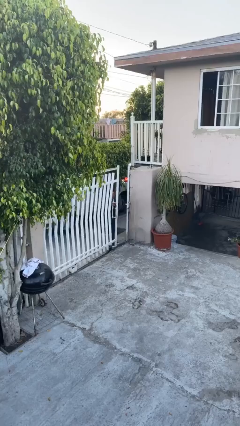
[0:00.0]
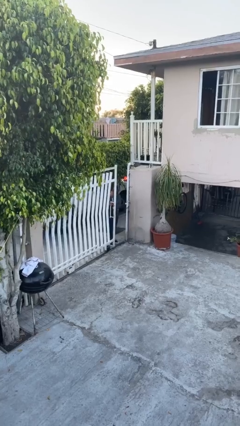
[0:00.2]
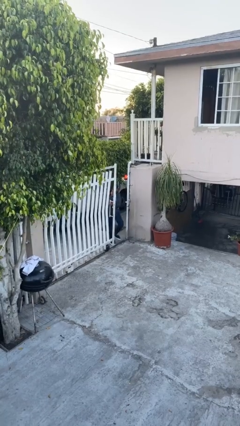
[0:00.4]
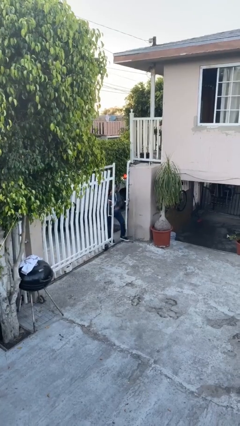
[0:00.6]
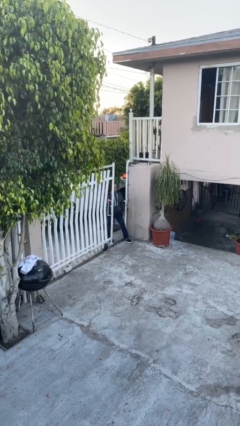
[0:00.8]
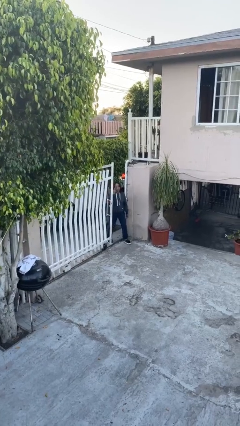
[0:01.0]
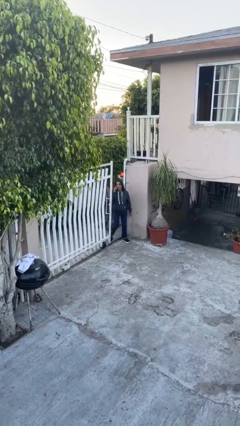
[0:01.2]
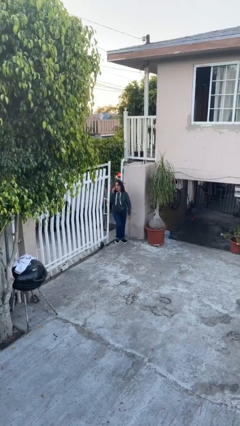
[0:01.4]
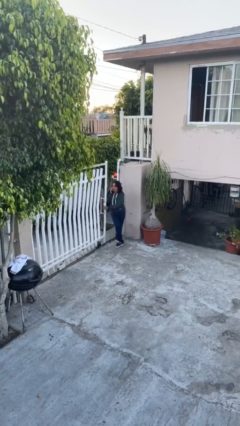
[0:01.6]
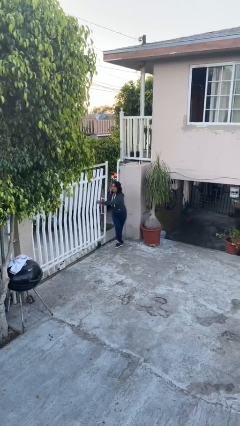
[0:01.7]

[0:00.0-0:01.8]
person enters scene through structure

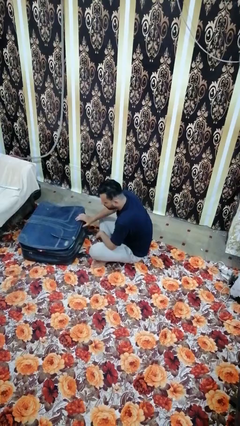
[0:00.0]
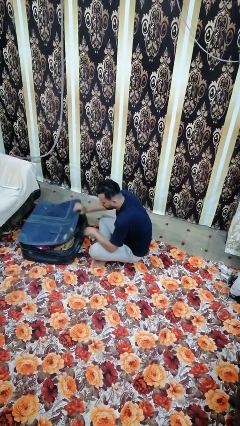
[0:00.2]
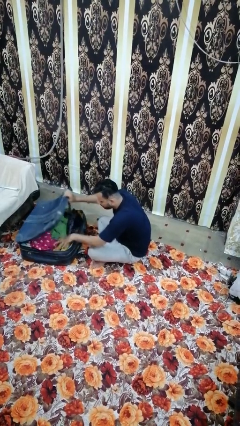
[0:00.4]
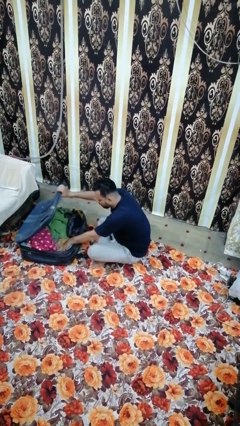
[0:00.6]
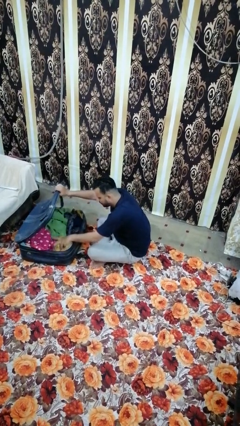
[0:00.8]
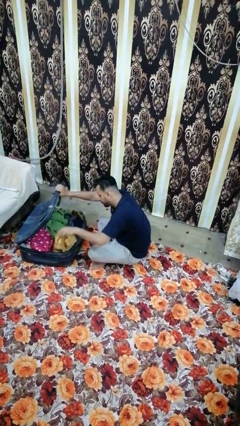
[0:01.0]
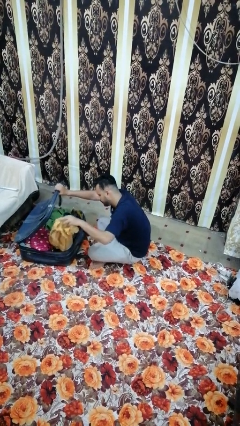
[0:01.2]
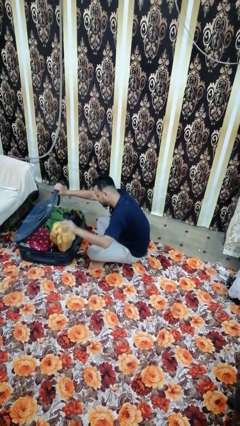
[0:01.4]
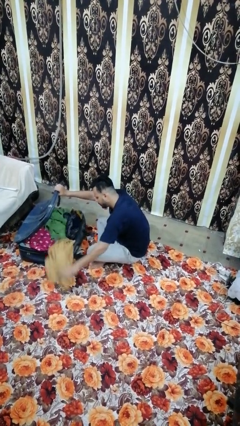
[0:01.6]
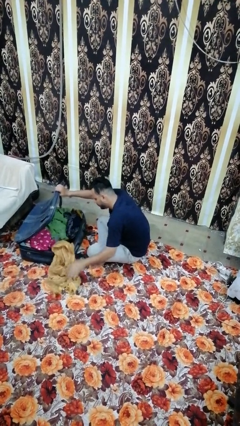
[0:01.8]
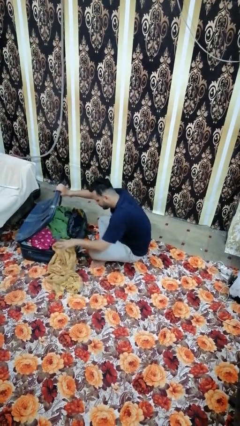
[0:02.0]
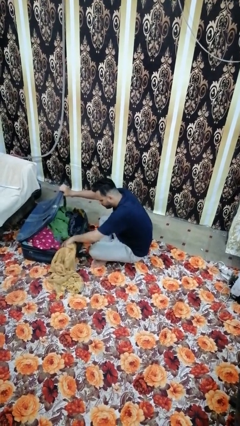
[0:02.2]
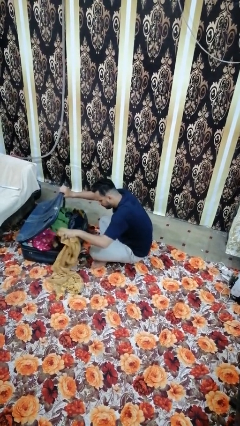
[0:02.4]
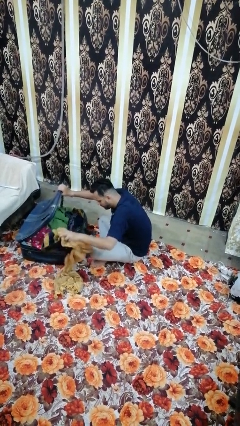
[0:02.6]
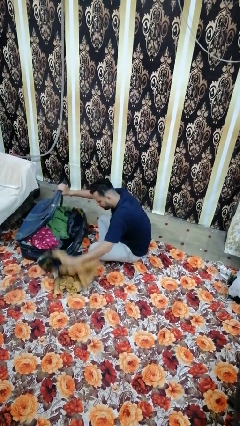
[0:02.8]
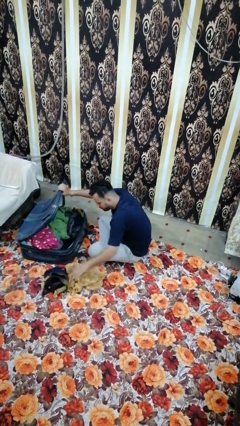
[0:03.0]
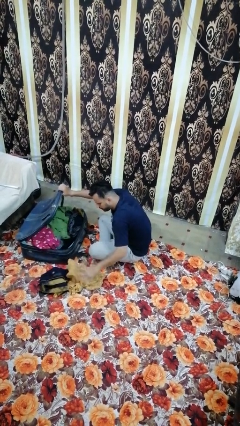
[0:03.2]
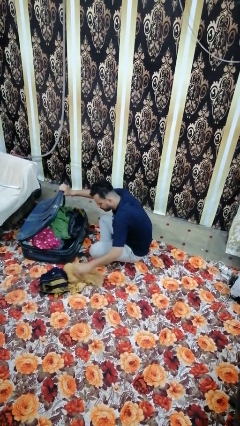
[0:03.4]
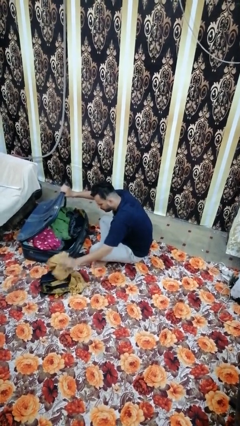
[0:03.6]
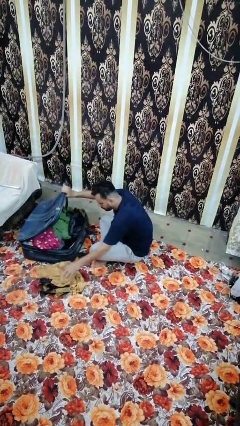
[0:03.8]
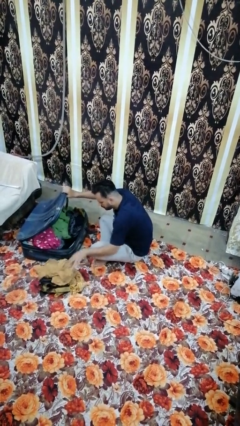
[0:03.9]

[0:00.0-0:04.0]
person unloads clothes from suitcase

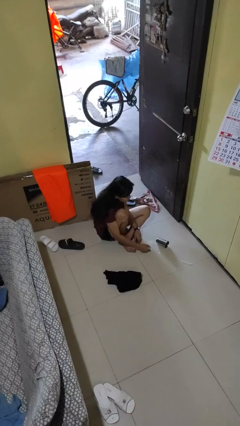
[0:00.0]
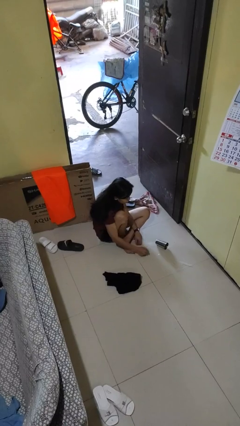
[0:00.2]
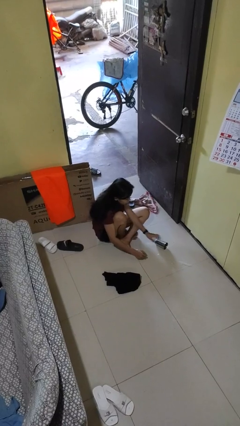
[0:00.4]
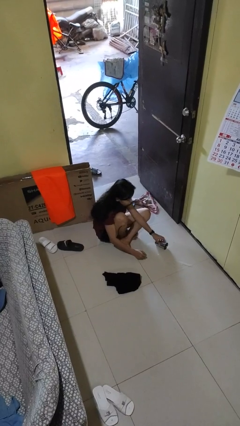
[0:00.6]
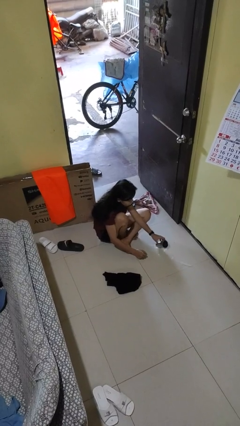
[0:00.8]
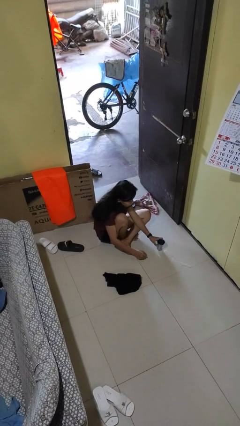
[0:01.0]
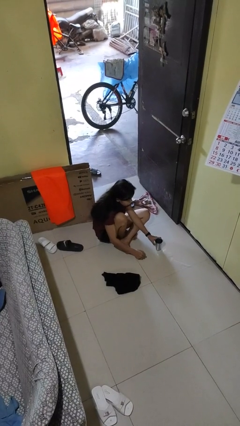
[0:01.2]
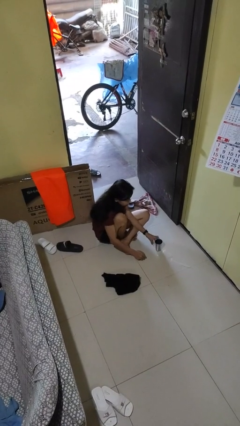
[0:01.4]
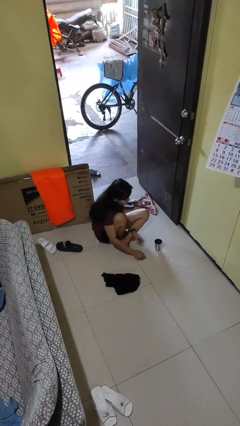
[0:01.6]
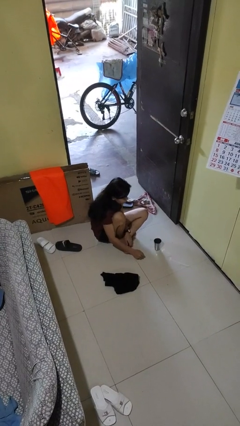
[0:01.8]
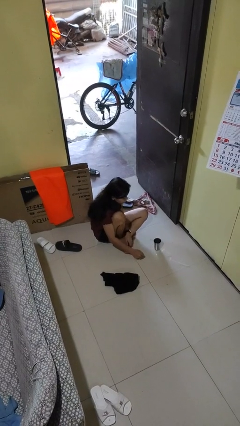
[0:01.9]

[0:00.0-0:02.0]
person sets upright glass

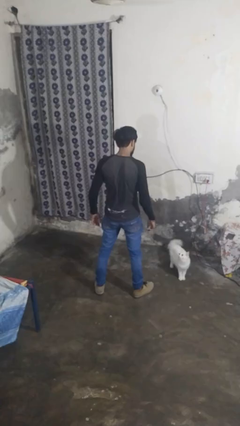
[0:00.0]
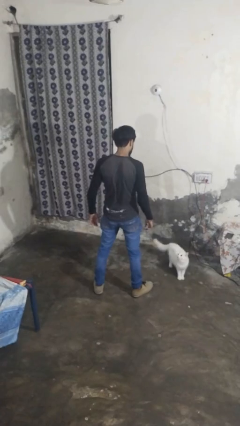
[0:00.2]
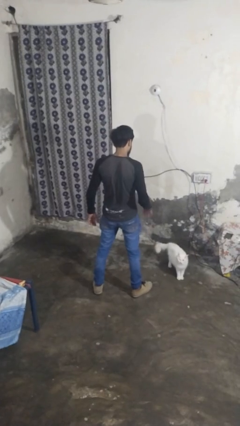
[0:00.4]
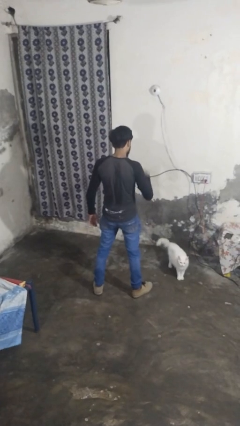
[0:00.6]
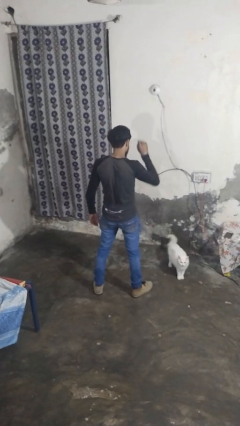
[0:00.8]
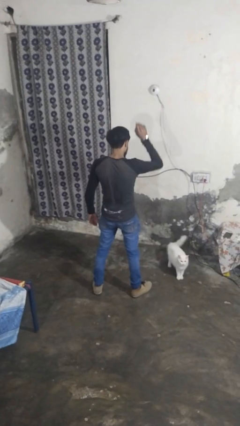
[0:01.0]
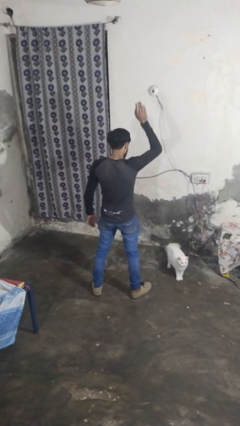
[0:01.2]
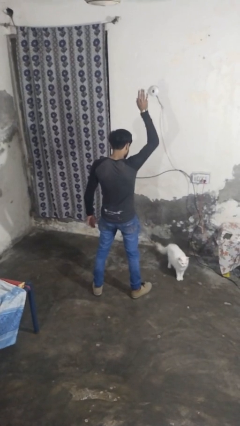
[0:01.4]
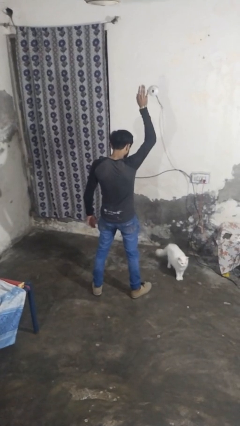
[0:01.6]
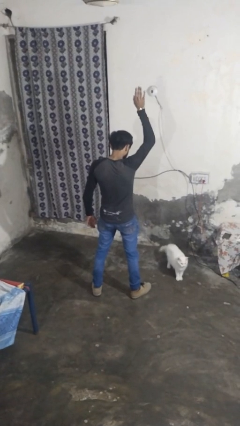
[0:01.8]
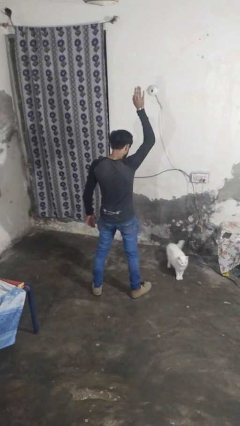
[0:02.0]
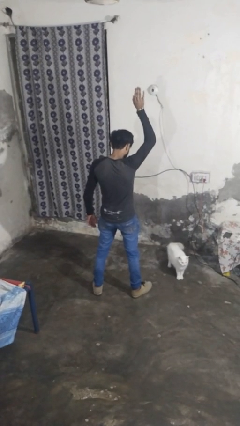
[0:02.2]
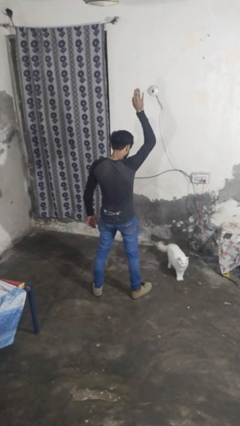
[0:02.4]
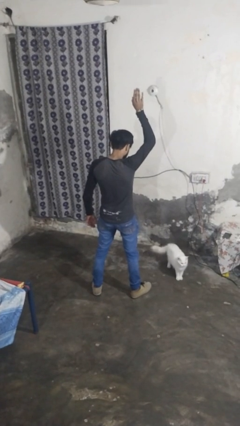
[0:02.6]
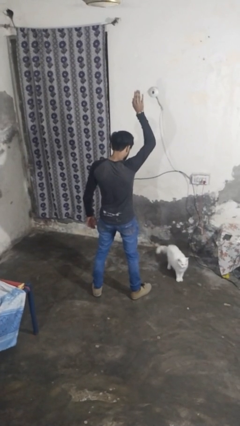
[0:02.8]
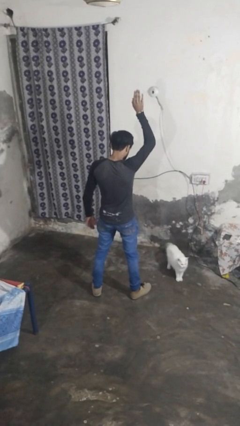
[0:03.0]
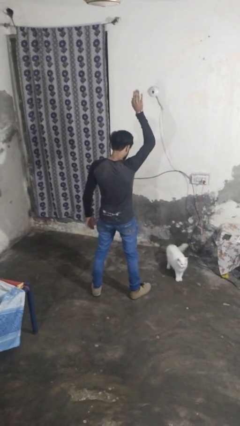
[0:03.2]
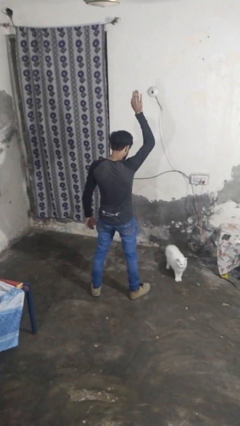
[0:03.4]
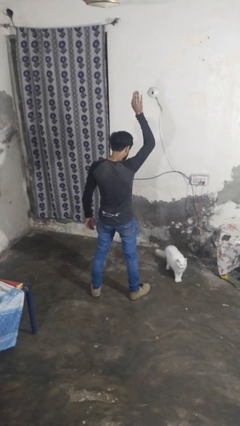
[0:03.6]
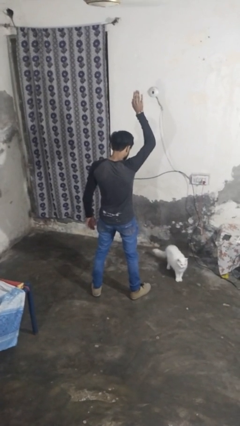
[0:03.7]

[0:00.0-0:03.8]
person gestures raise hand

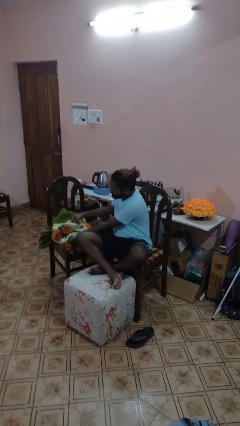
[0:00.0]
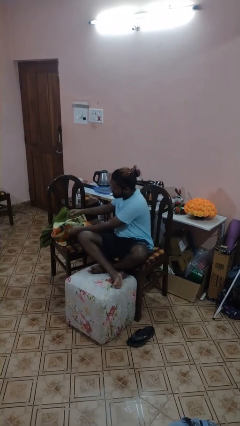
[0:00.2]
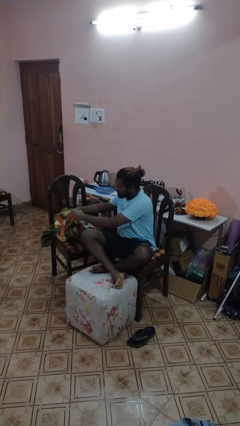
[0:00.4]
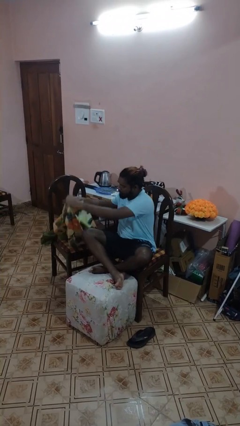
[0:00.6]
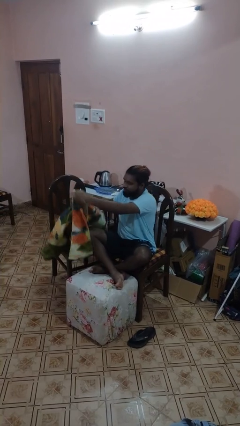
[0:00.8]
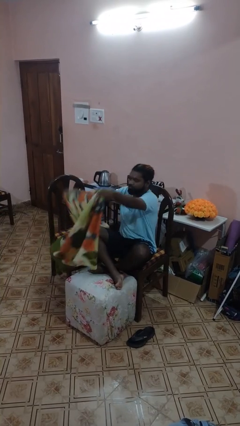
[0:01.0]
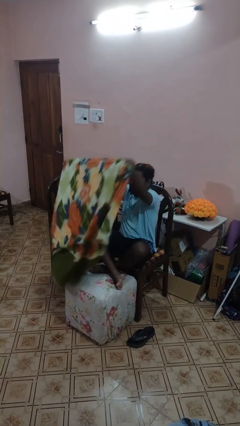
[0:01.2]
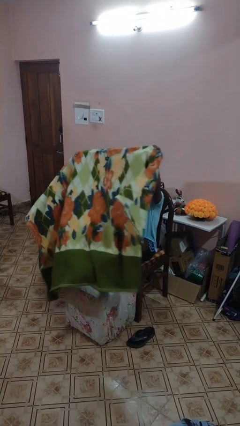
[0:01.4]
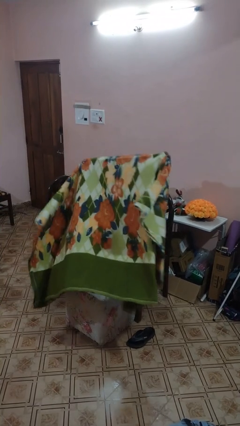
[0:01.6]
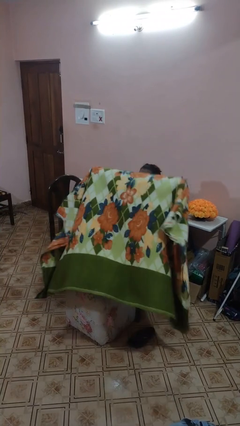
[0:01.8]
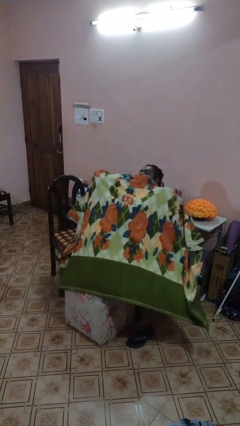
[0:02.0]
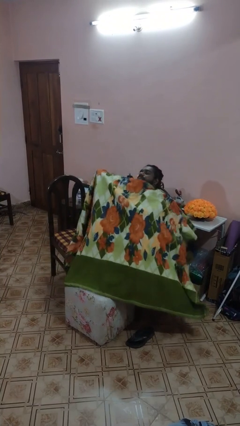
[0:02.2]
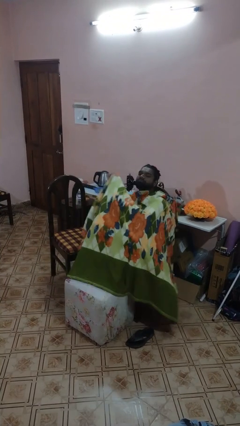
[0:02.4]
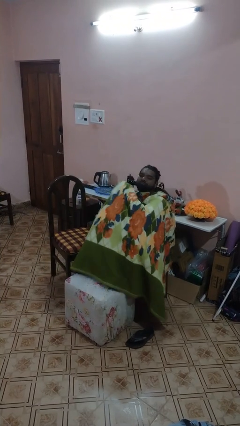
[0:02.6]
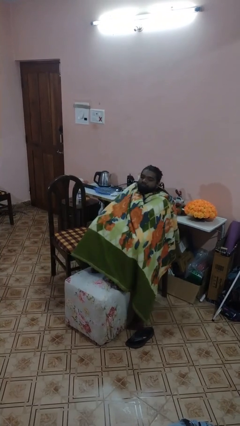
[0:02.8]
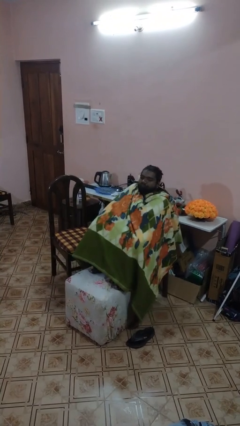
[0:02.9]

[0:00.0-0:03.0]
person covers with blanket

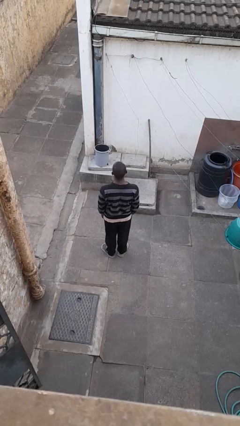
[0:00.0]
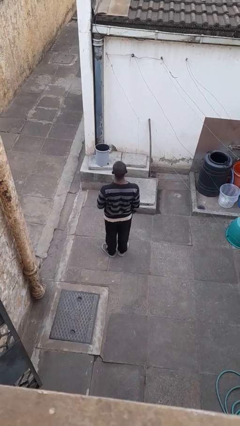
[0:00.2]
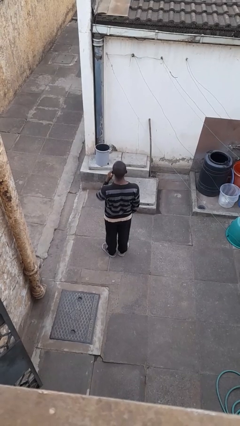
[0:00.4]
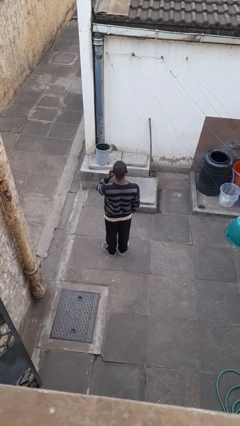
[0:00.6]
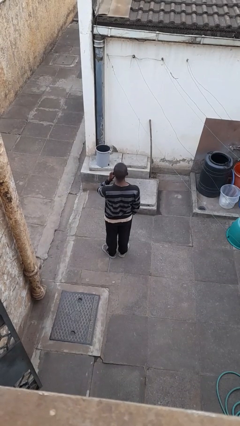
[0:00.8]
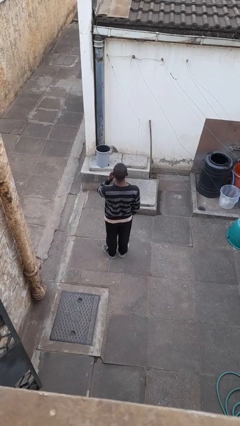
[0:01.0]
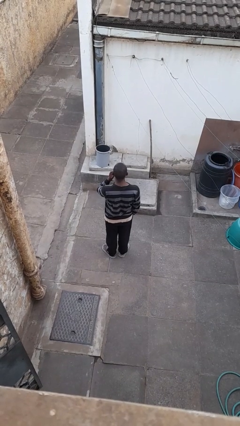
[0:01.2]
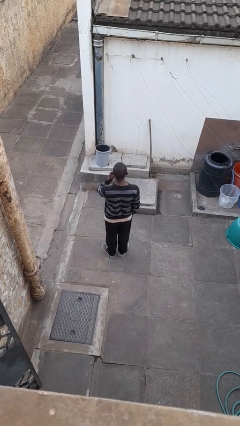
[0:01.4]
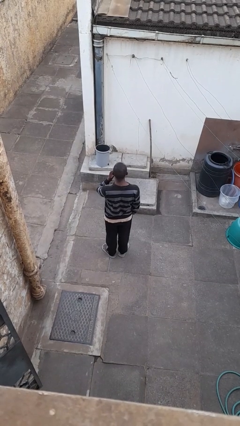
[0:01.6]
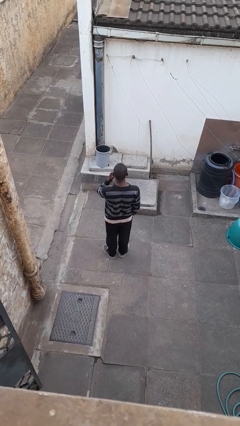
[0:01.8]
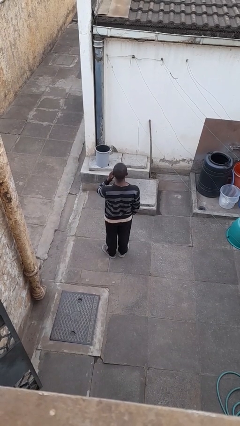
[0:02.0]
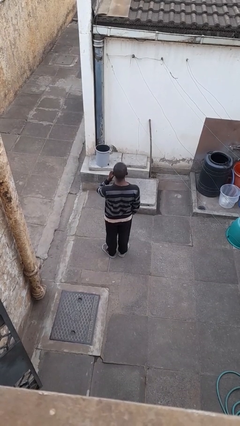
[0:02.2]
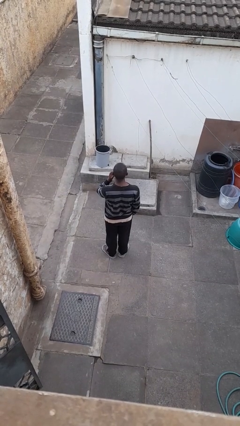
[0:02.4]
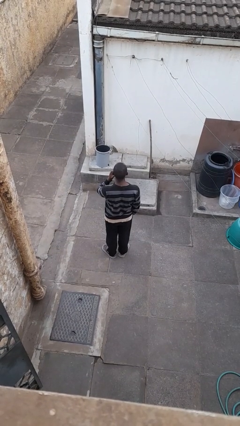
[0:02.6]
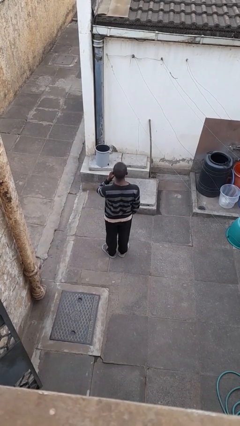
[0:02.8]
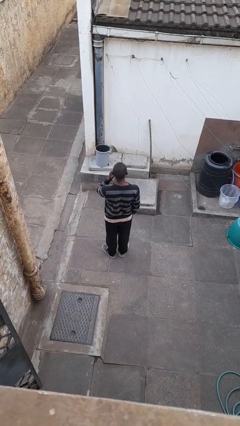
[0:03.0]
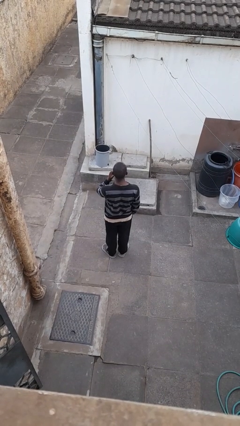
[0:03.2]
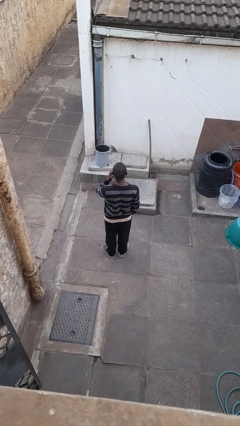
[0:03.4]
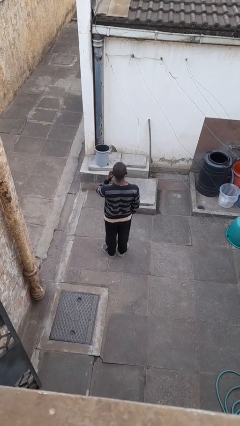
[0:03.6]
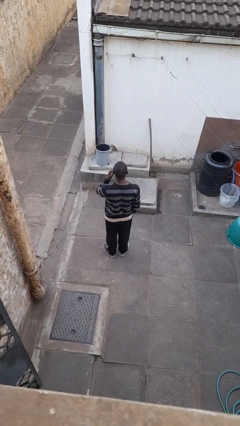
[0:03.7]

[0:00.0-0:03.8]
person scratches face
